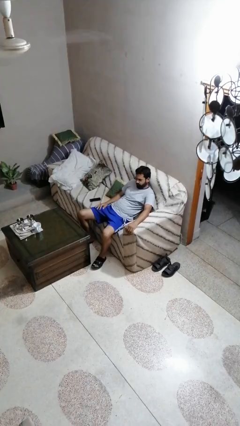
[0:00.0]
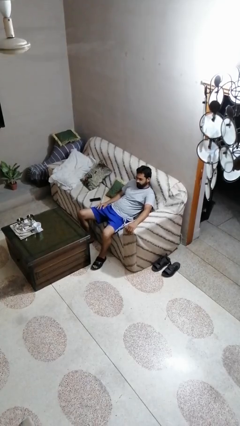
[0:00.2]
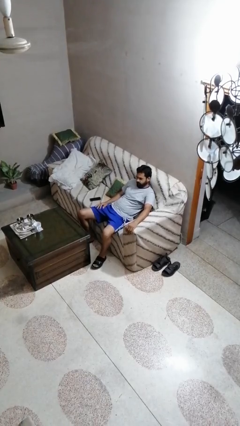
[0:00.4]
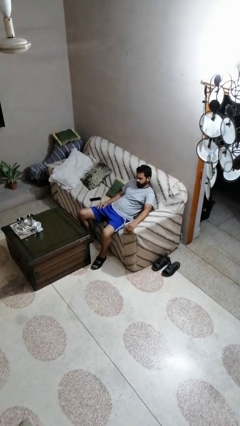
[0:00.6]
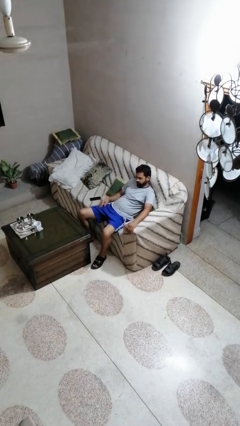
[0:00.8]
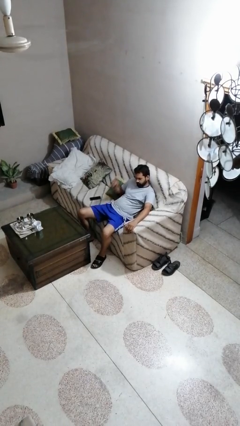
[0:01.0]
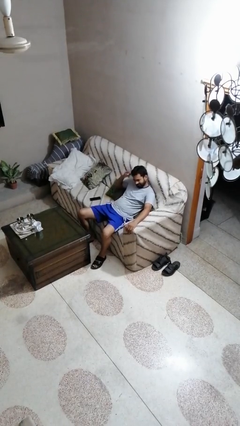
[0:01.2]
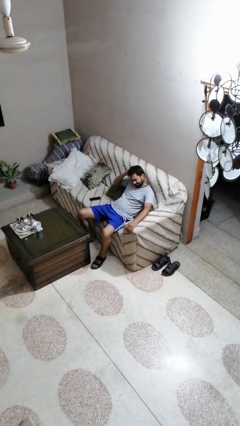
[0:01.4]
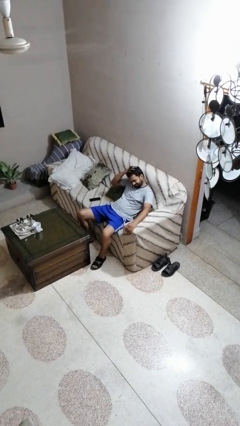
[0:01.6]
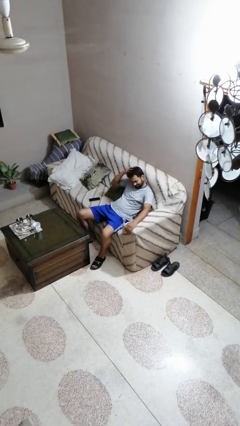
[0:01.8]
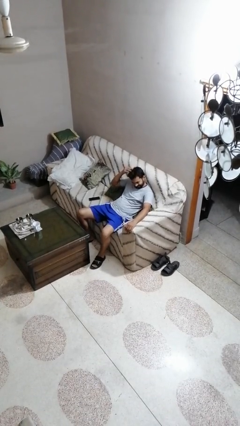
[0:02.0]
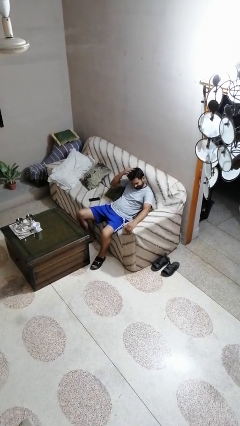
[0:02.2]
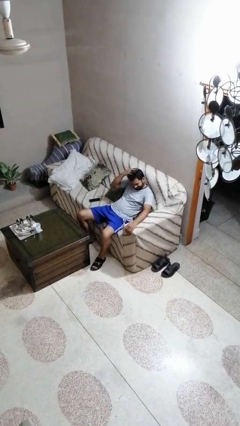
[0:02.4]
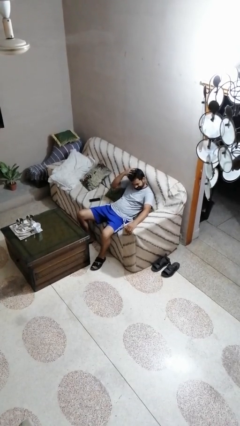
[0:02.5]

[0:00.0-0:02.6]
person strokes hair

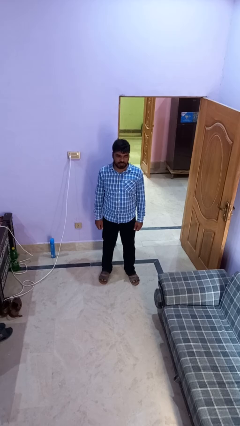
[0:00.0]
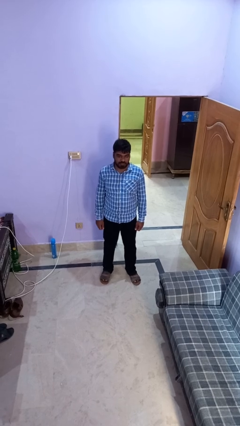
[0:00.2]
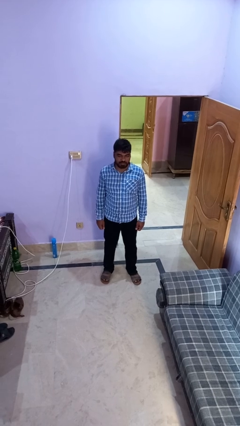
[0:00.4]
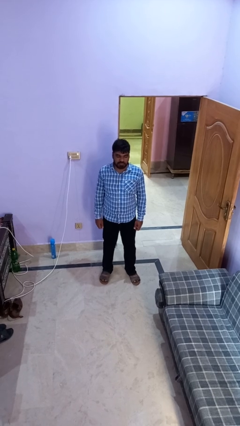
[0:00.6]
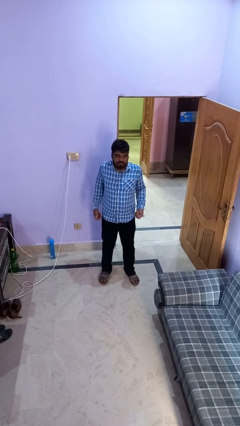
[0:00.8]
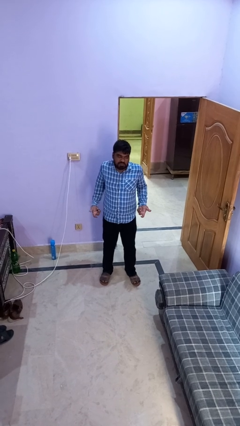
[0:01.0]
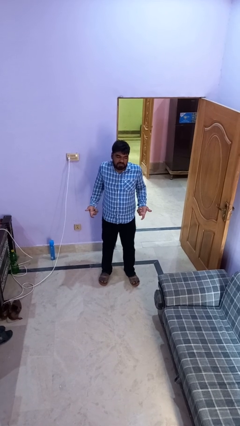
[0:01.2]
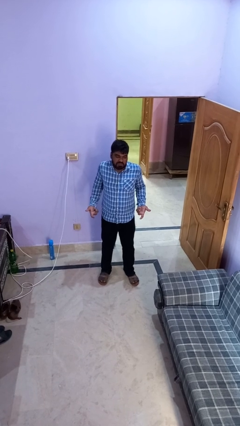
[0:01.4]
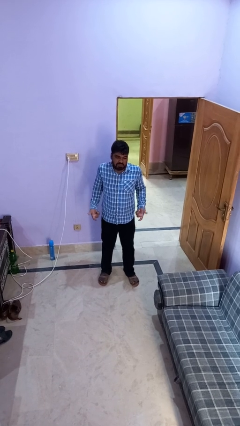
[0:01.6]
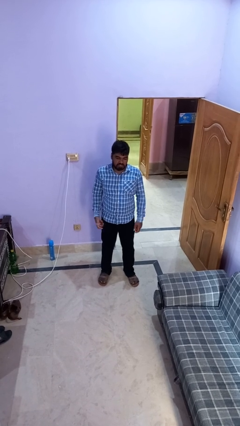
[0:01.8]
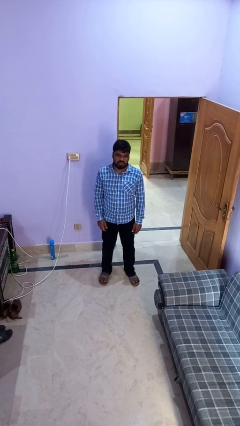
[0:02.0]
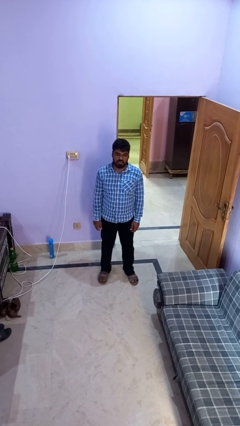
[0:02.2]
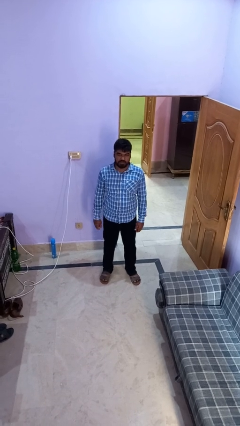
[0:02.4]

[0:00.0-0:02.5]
person shrugs

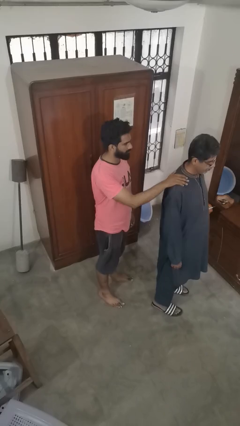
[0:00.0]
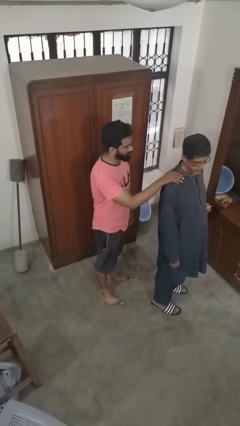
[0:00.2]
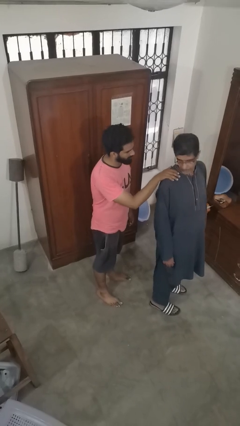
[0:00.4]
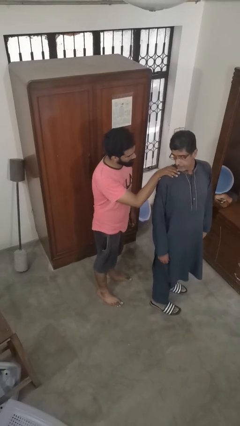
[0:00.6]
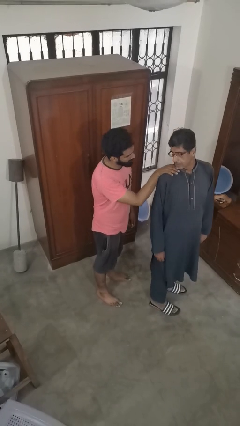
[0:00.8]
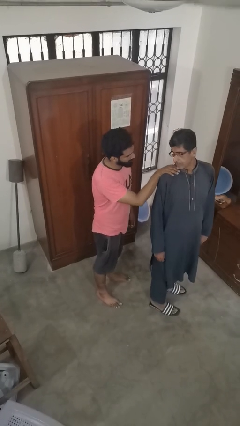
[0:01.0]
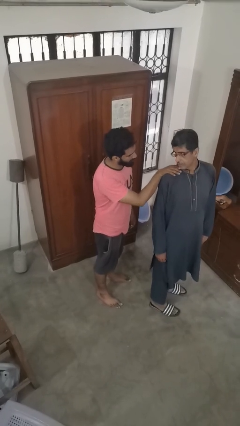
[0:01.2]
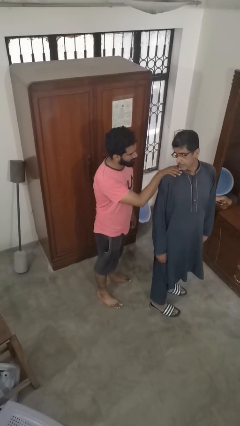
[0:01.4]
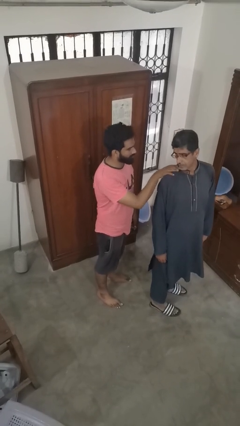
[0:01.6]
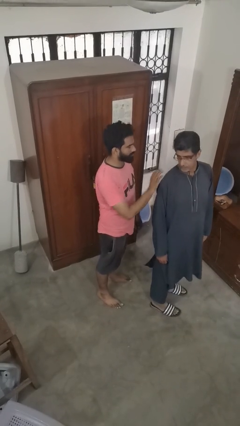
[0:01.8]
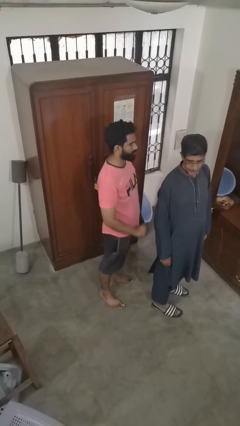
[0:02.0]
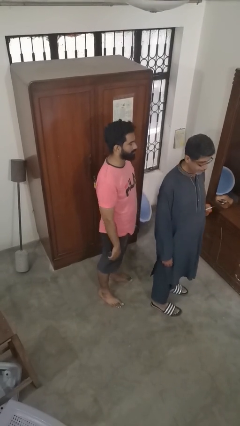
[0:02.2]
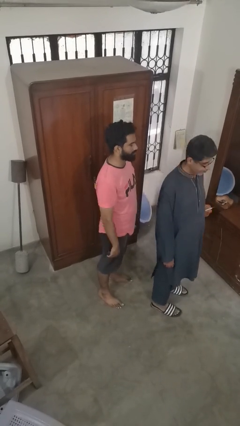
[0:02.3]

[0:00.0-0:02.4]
person spins person around

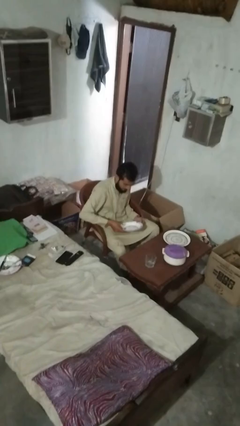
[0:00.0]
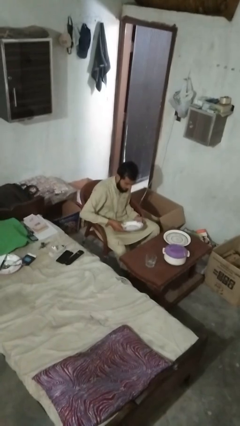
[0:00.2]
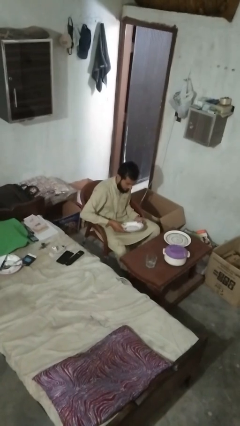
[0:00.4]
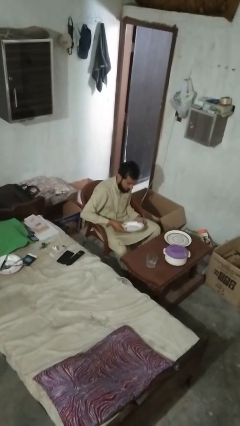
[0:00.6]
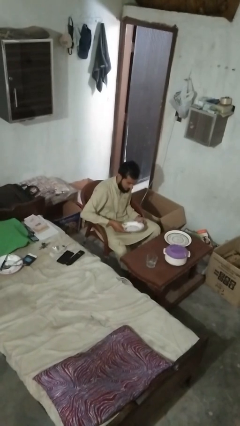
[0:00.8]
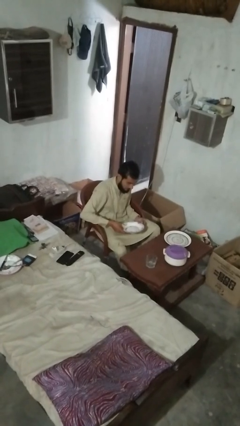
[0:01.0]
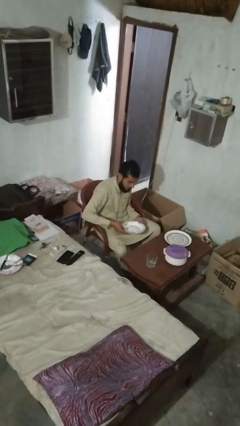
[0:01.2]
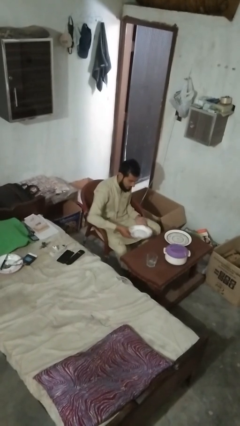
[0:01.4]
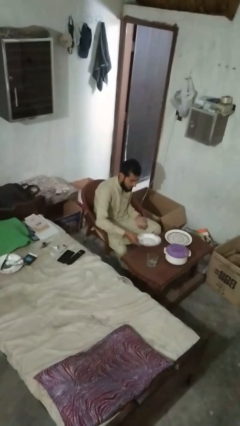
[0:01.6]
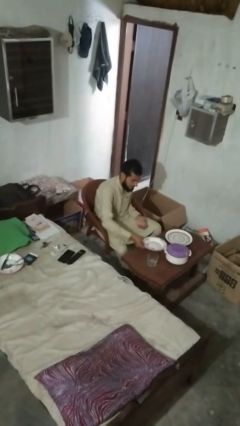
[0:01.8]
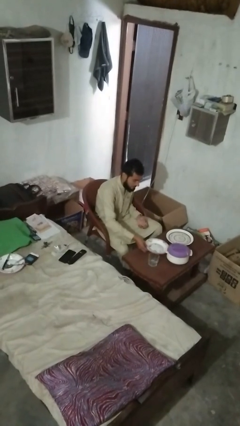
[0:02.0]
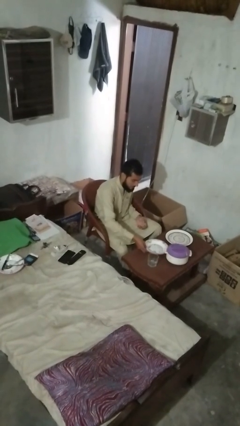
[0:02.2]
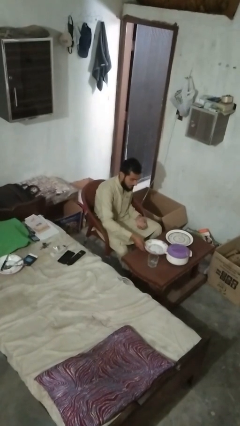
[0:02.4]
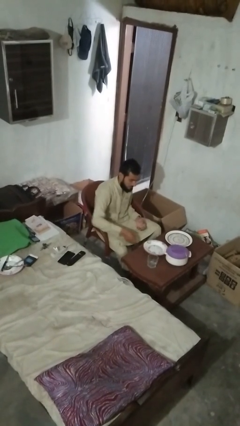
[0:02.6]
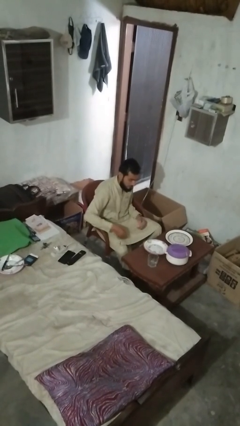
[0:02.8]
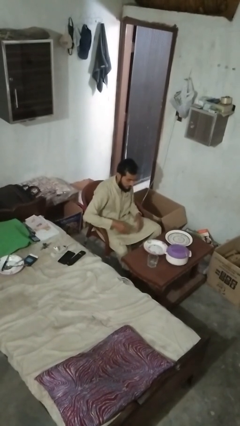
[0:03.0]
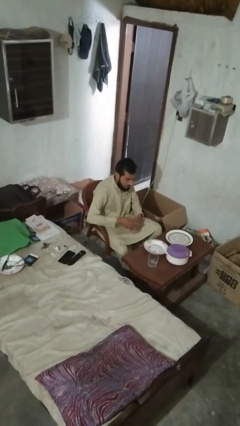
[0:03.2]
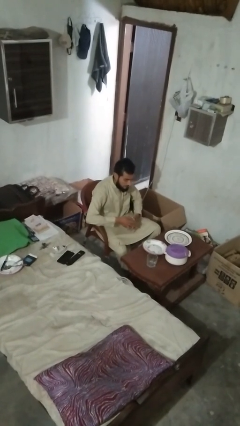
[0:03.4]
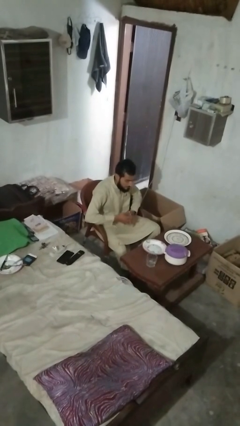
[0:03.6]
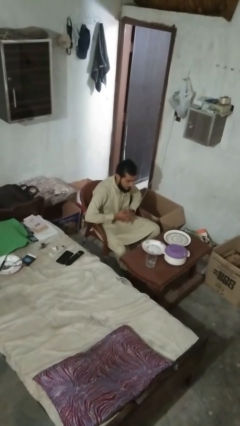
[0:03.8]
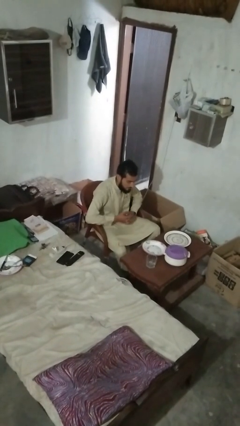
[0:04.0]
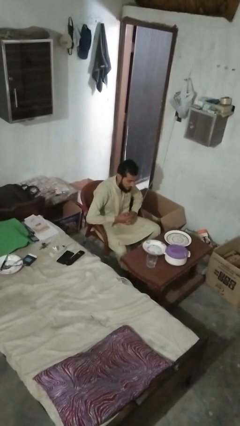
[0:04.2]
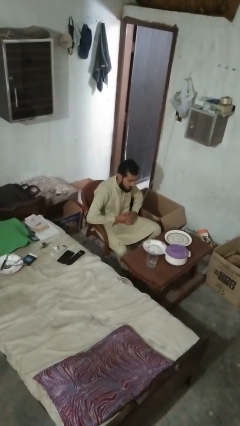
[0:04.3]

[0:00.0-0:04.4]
person sets table

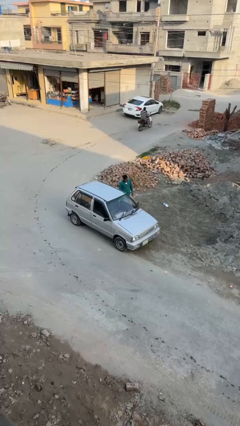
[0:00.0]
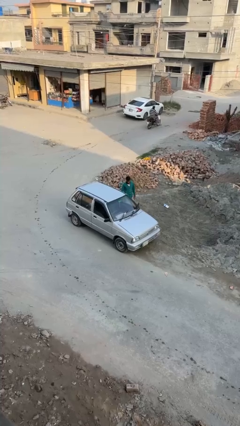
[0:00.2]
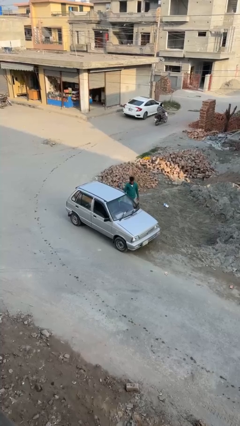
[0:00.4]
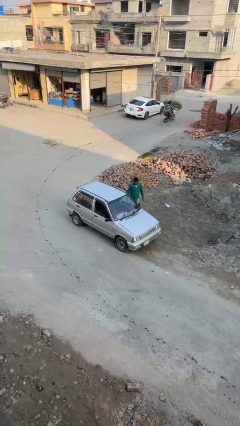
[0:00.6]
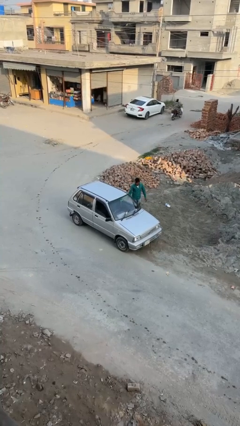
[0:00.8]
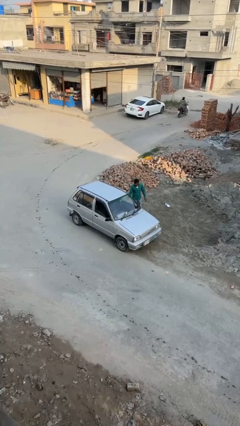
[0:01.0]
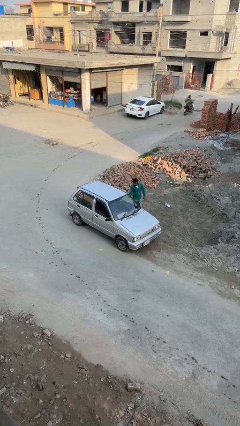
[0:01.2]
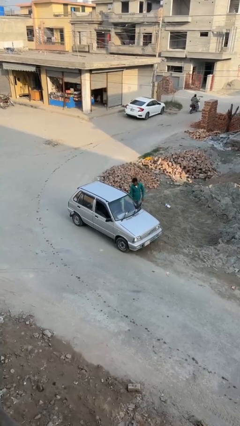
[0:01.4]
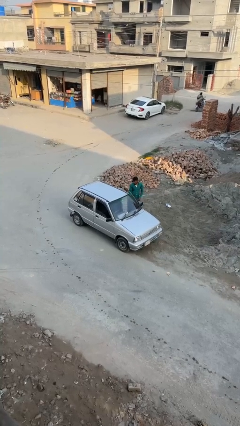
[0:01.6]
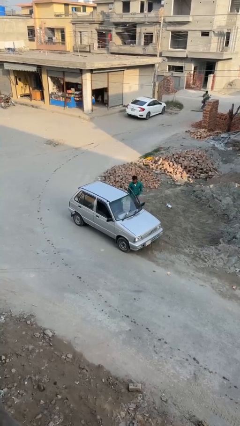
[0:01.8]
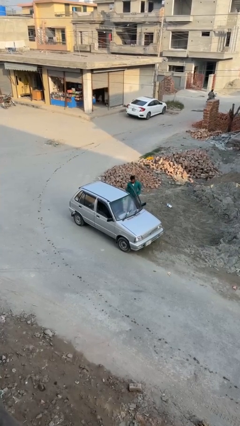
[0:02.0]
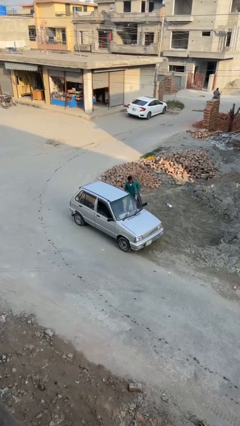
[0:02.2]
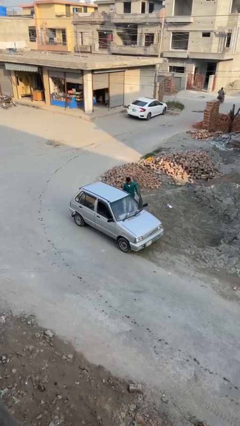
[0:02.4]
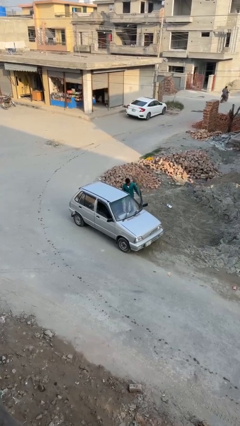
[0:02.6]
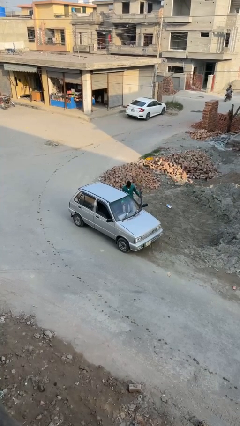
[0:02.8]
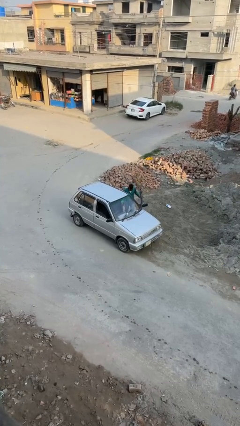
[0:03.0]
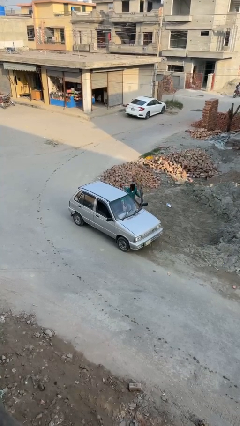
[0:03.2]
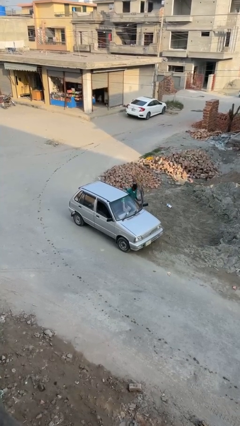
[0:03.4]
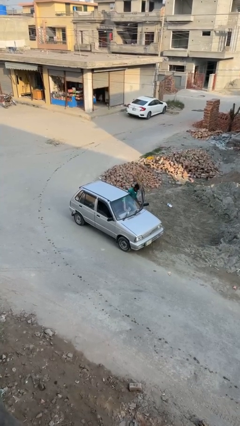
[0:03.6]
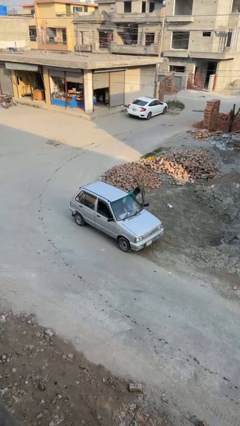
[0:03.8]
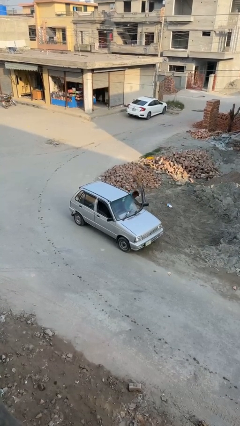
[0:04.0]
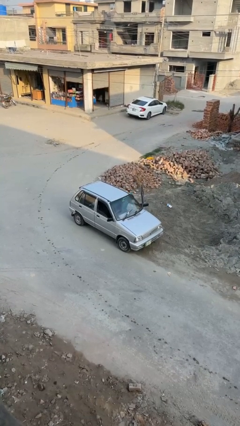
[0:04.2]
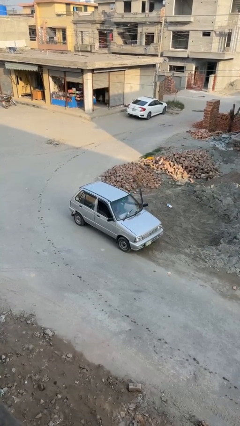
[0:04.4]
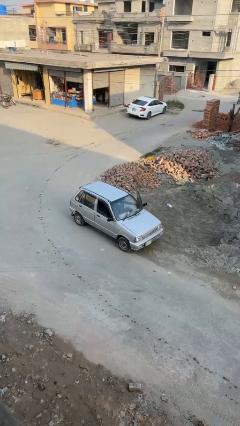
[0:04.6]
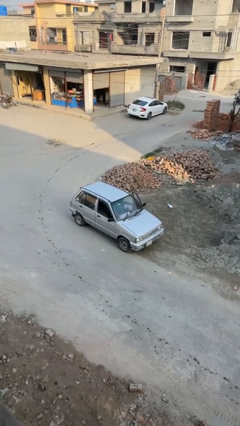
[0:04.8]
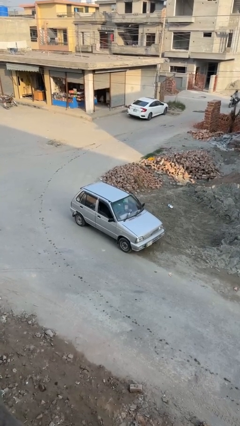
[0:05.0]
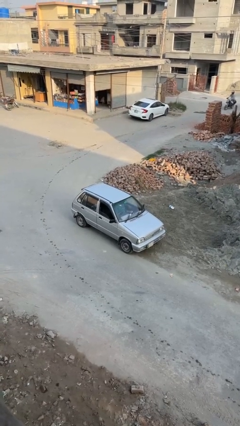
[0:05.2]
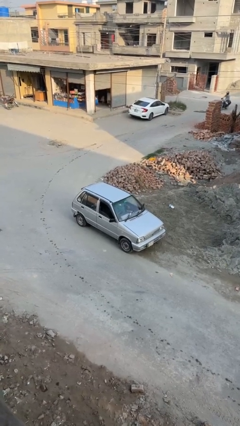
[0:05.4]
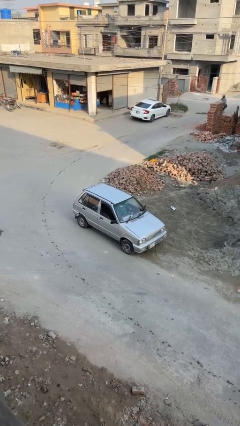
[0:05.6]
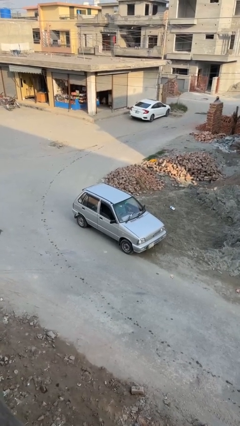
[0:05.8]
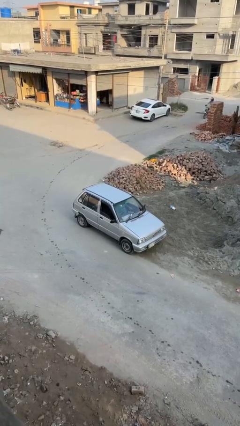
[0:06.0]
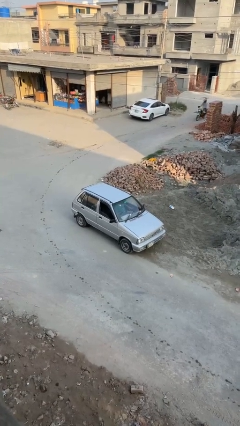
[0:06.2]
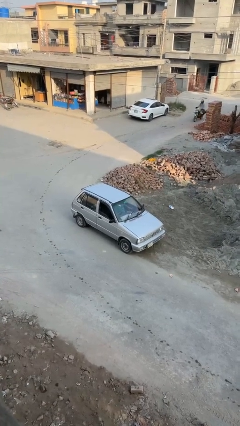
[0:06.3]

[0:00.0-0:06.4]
car picks up person
